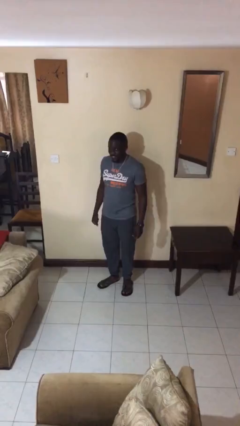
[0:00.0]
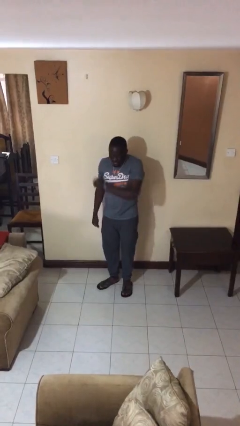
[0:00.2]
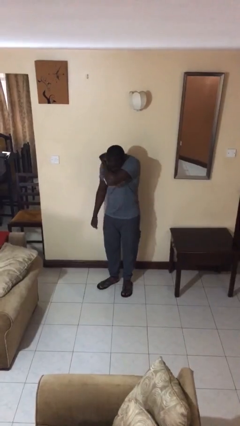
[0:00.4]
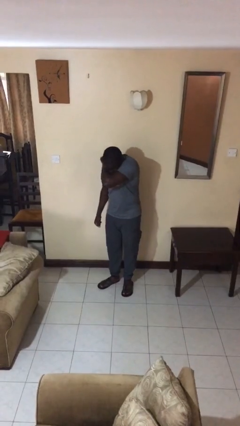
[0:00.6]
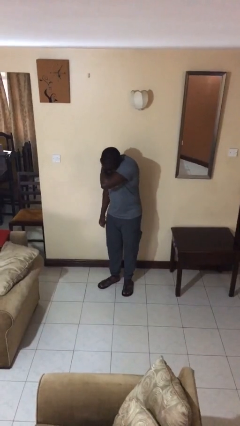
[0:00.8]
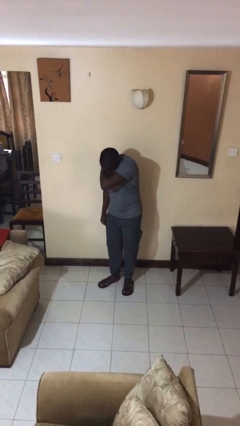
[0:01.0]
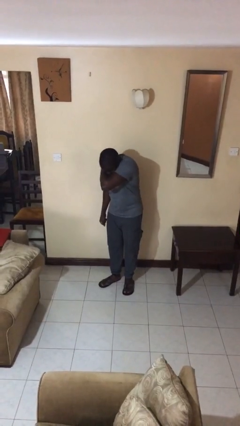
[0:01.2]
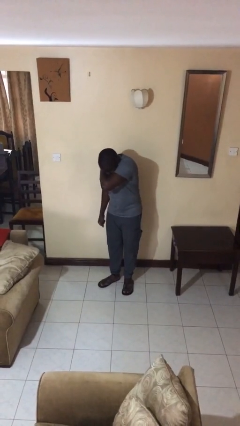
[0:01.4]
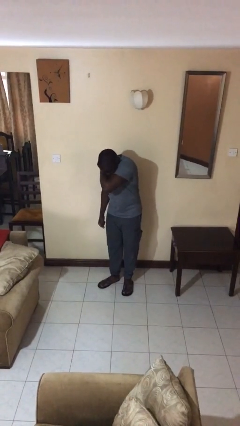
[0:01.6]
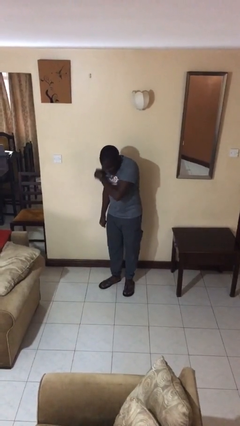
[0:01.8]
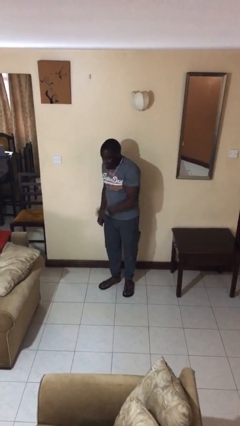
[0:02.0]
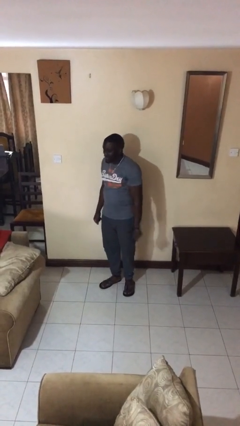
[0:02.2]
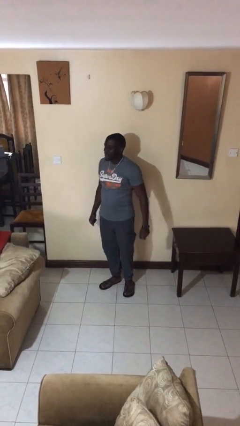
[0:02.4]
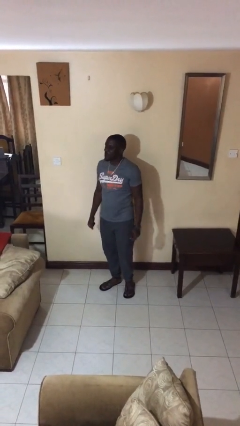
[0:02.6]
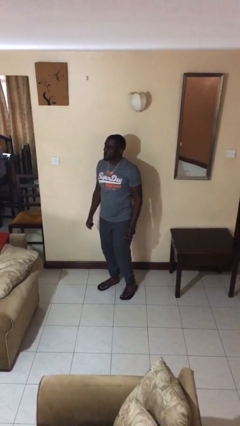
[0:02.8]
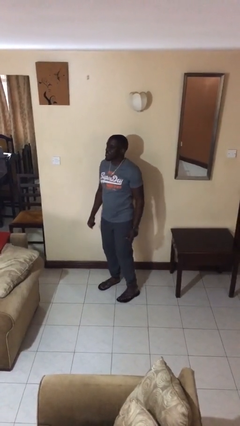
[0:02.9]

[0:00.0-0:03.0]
person sneezes into arm

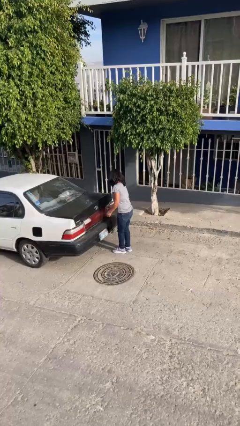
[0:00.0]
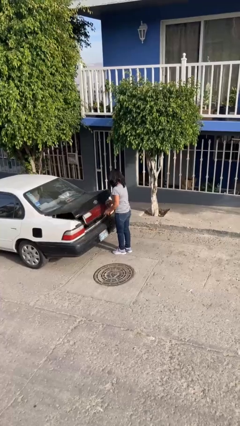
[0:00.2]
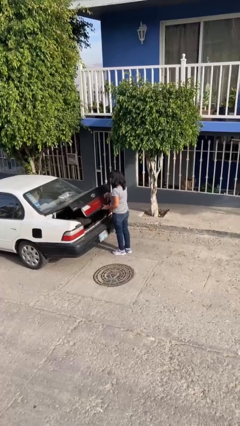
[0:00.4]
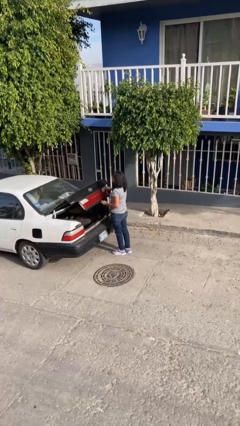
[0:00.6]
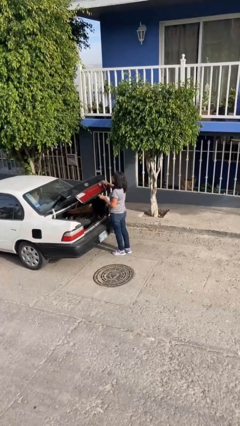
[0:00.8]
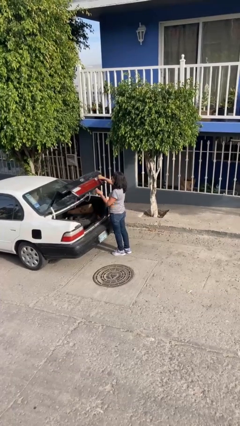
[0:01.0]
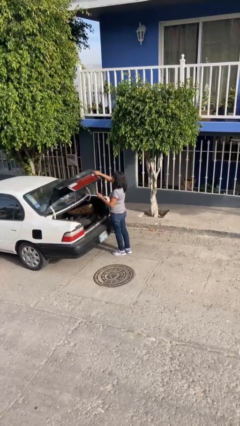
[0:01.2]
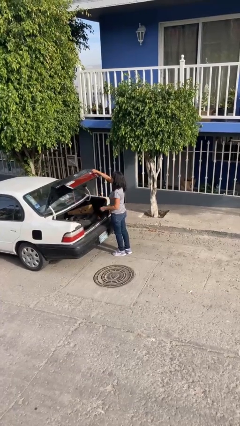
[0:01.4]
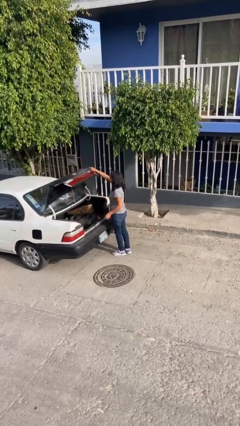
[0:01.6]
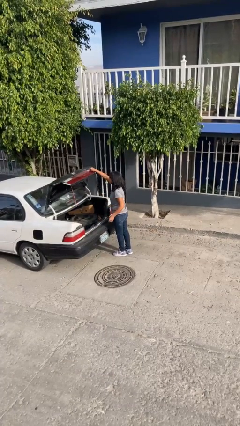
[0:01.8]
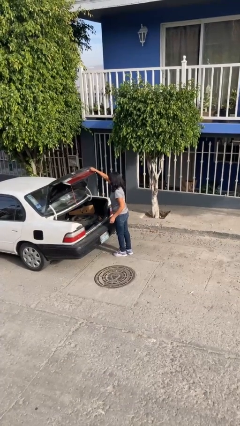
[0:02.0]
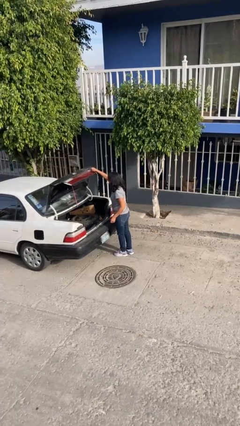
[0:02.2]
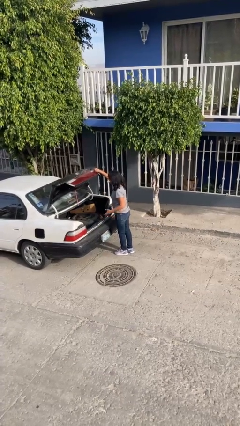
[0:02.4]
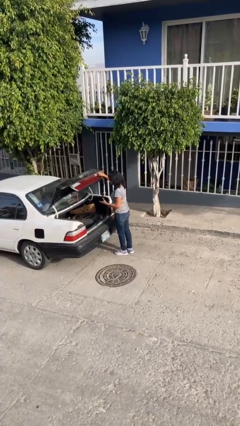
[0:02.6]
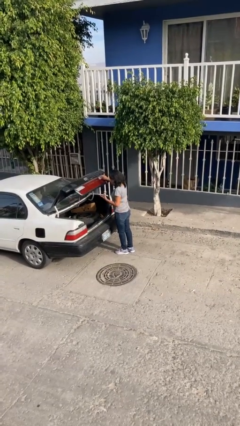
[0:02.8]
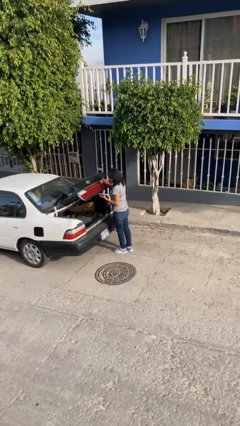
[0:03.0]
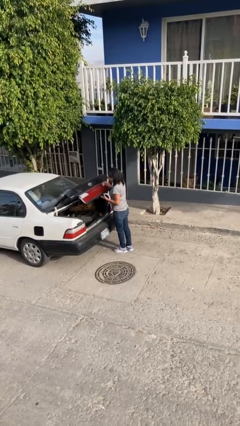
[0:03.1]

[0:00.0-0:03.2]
person opens car trunk

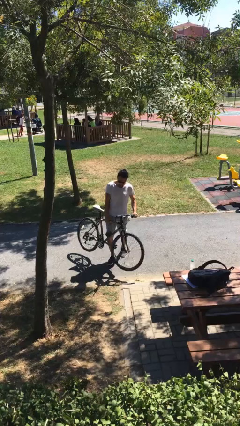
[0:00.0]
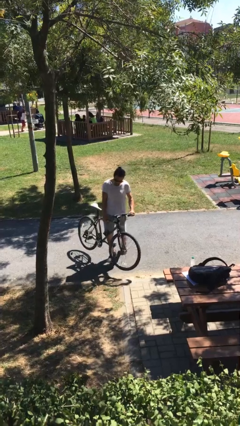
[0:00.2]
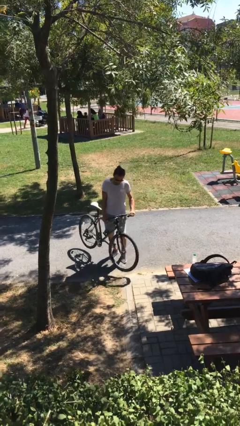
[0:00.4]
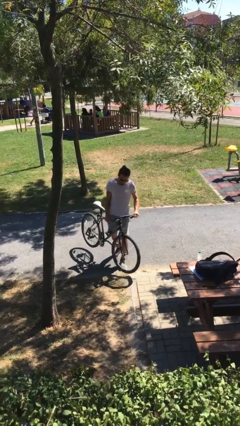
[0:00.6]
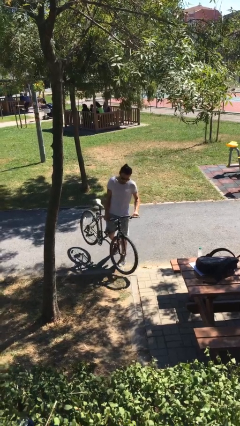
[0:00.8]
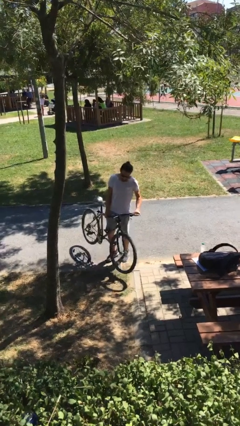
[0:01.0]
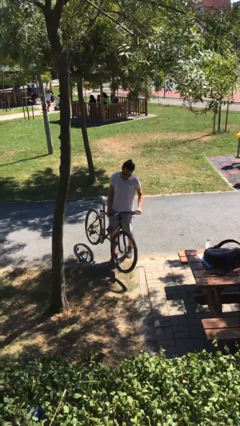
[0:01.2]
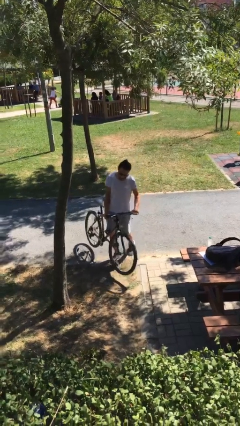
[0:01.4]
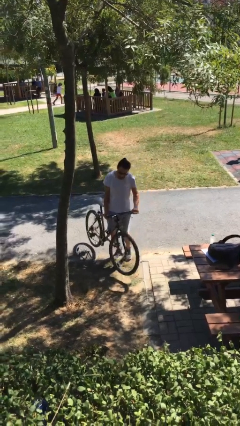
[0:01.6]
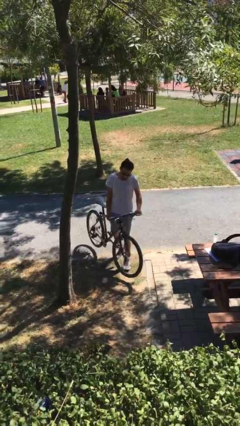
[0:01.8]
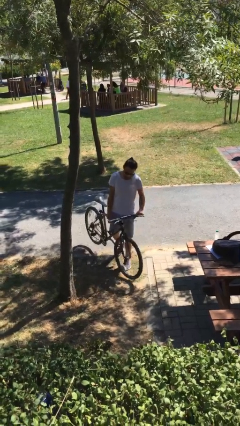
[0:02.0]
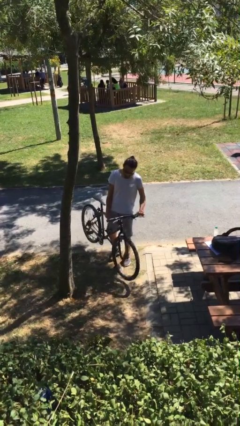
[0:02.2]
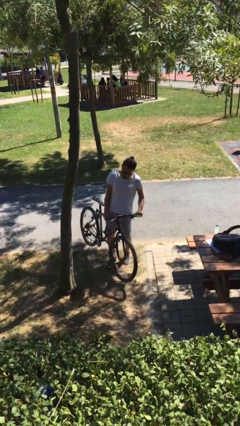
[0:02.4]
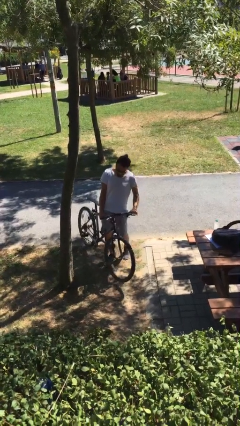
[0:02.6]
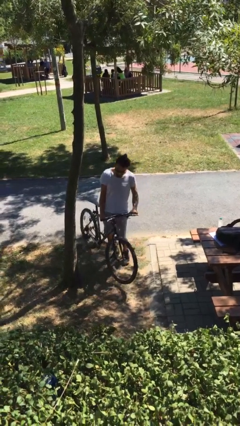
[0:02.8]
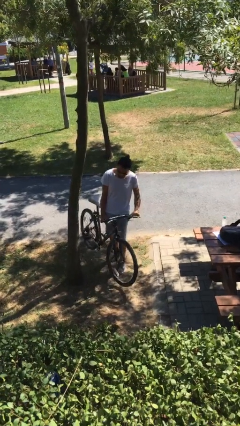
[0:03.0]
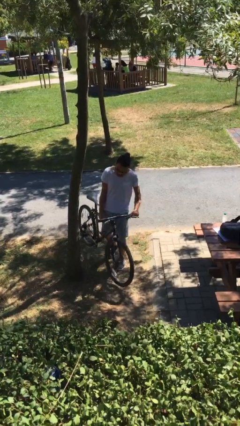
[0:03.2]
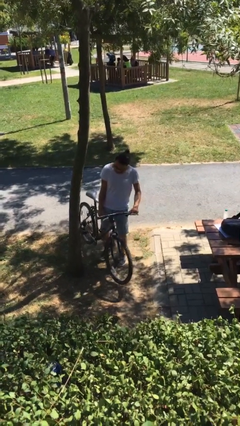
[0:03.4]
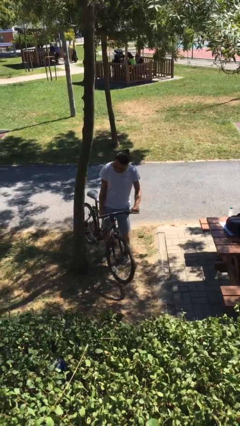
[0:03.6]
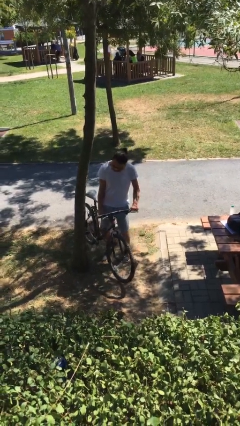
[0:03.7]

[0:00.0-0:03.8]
person carries heavy object

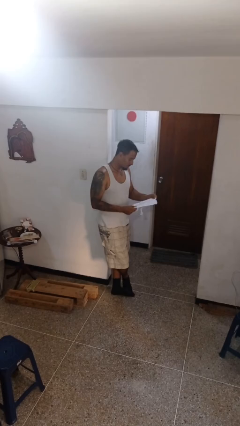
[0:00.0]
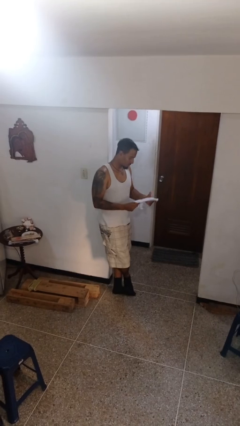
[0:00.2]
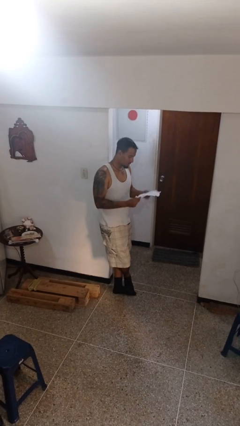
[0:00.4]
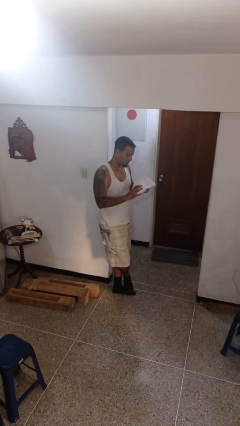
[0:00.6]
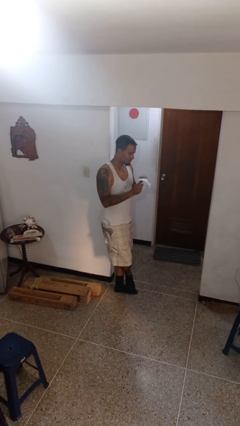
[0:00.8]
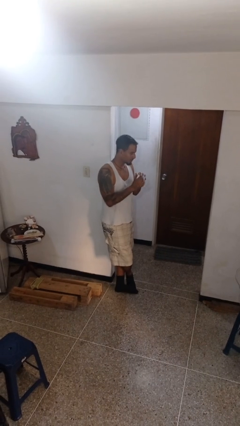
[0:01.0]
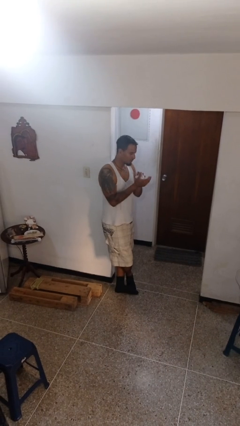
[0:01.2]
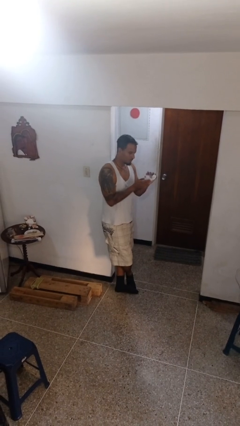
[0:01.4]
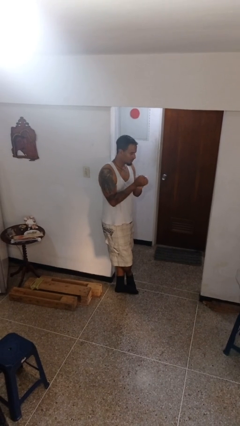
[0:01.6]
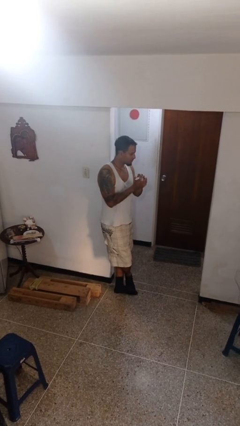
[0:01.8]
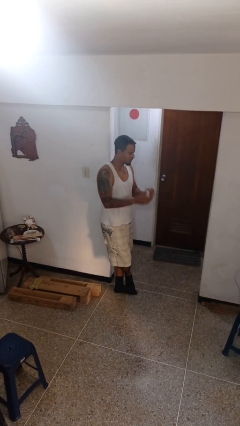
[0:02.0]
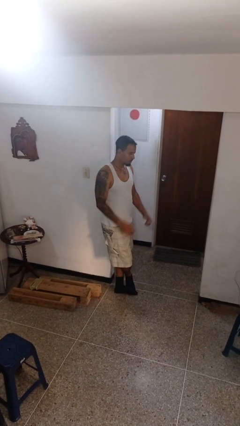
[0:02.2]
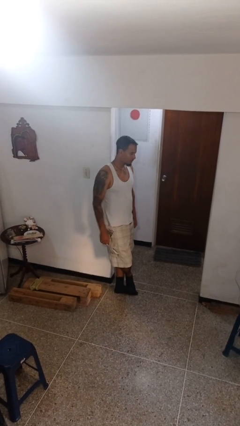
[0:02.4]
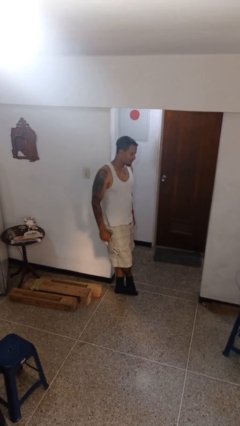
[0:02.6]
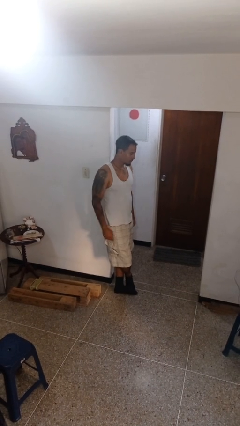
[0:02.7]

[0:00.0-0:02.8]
person crumples paper

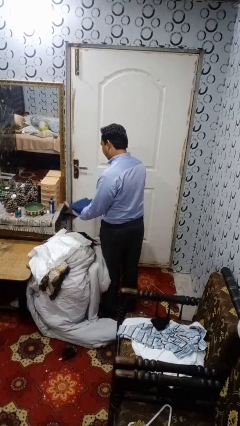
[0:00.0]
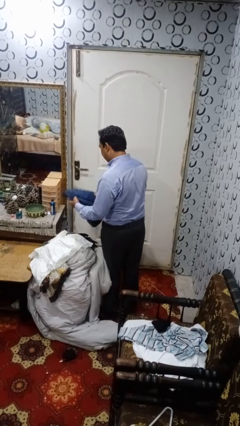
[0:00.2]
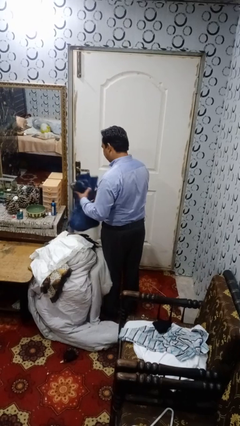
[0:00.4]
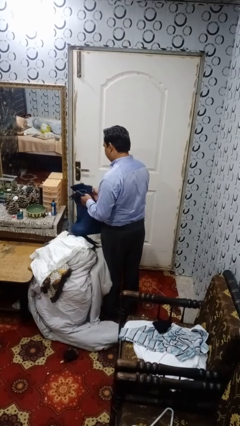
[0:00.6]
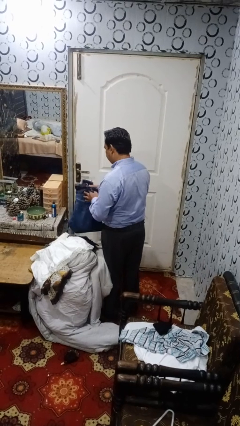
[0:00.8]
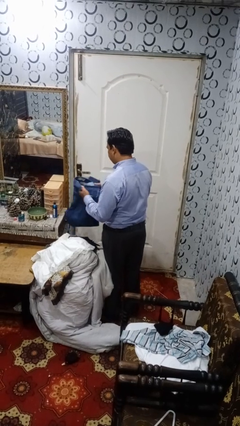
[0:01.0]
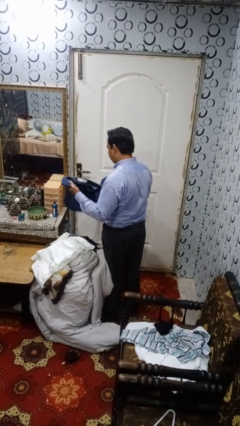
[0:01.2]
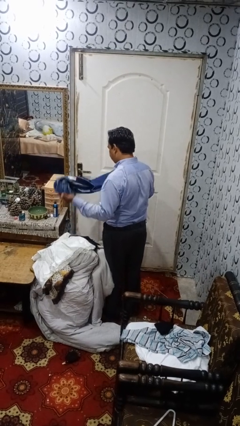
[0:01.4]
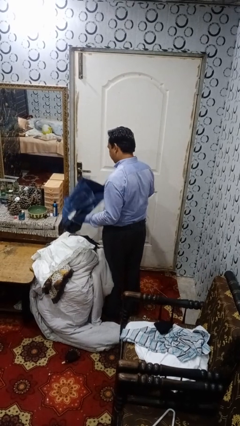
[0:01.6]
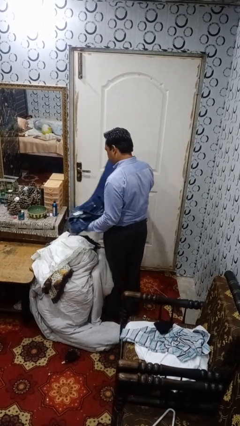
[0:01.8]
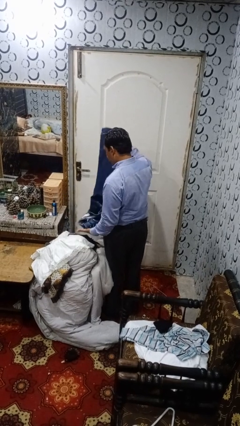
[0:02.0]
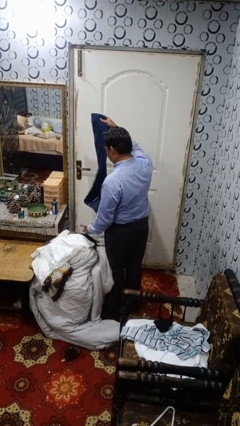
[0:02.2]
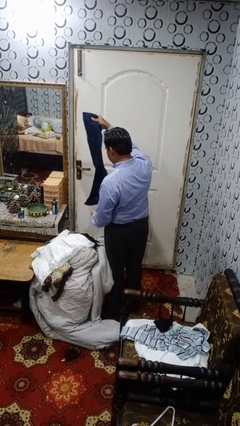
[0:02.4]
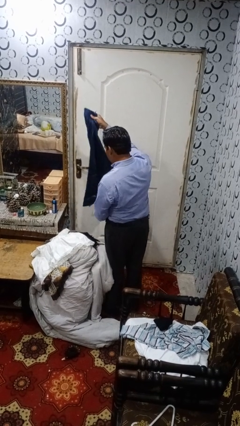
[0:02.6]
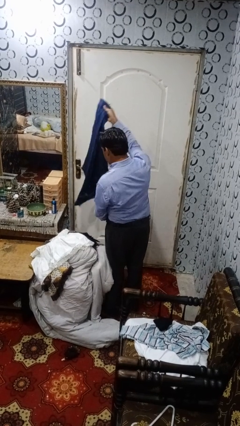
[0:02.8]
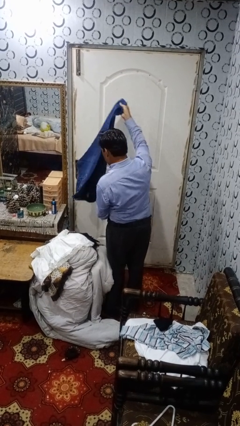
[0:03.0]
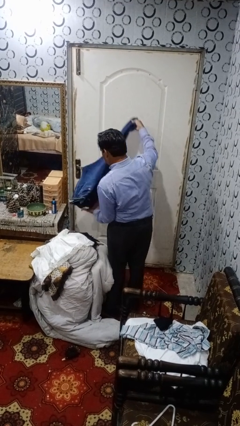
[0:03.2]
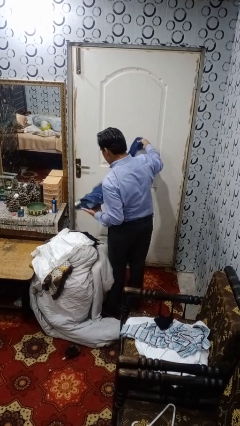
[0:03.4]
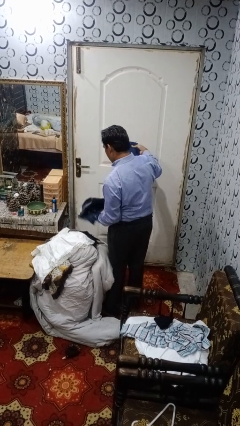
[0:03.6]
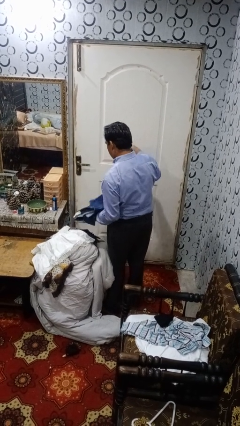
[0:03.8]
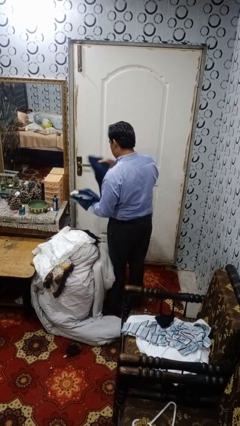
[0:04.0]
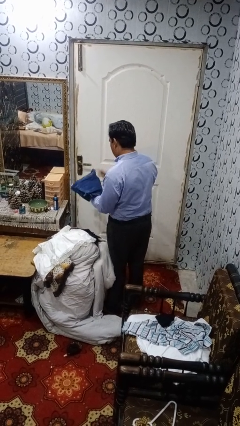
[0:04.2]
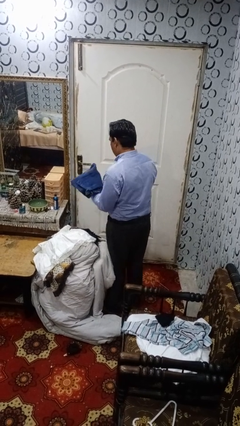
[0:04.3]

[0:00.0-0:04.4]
person folds pants
